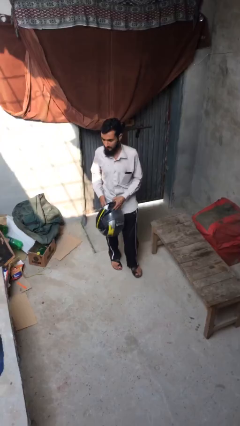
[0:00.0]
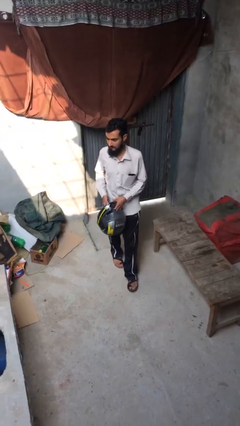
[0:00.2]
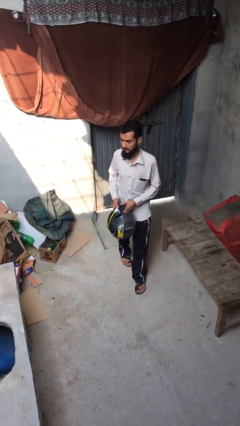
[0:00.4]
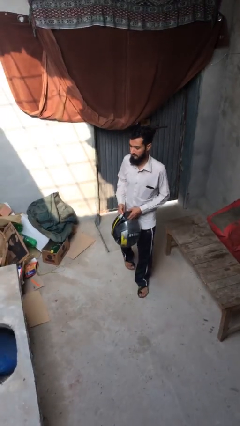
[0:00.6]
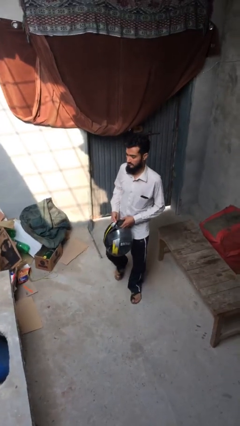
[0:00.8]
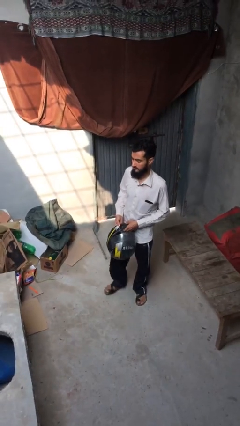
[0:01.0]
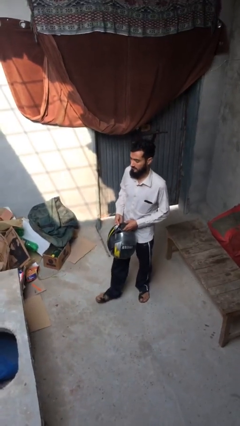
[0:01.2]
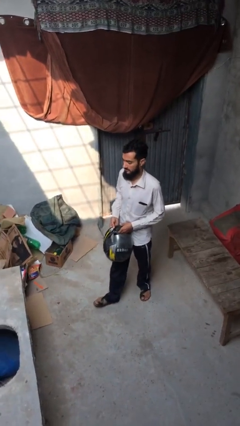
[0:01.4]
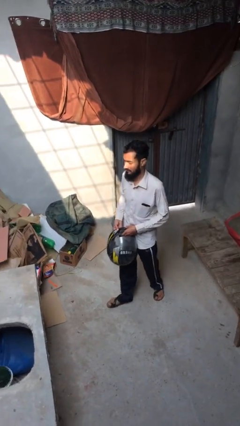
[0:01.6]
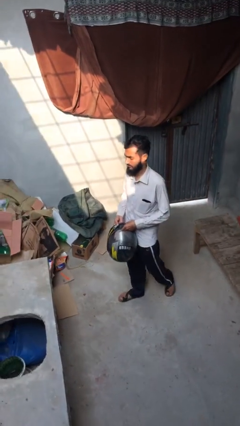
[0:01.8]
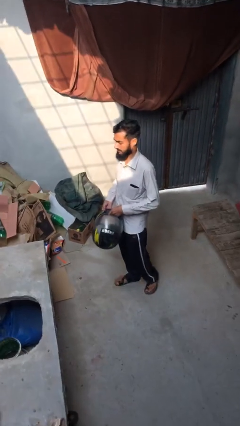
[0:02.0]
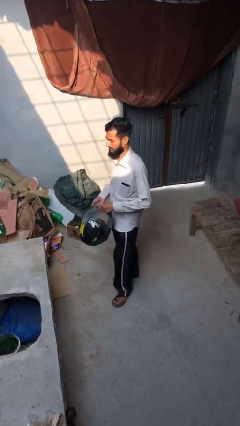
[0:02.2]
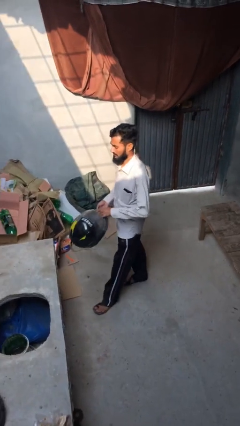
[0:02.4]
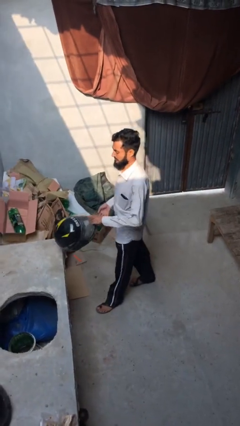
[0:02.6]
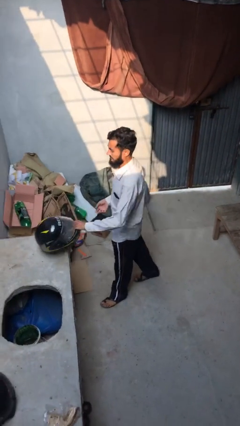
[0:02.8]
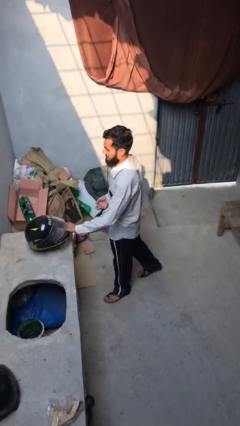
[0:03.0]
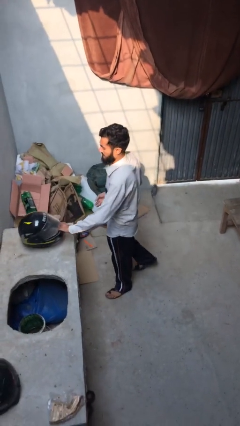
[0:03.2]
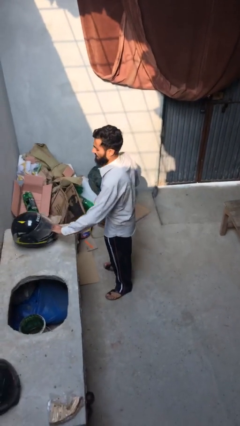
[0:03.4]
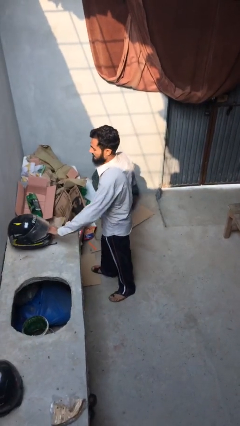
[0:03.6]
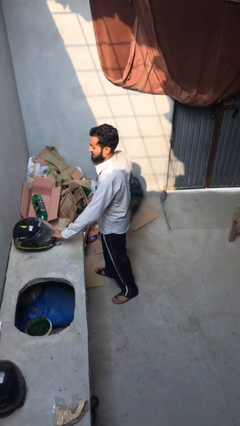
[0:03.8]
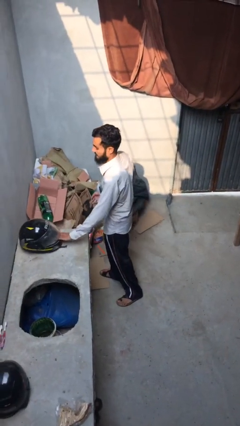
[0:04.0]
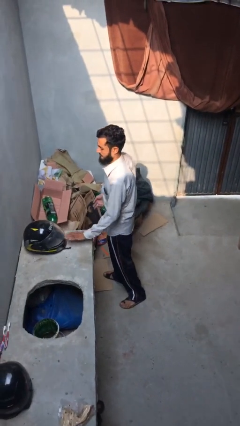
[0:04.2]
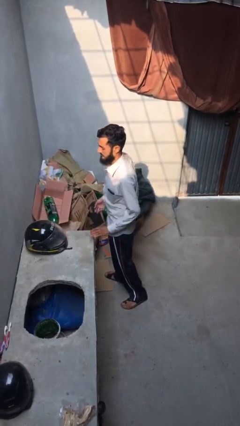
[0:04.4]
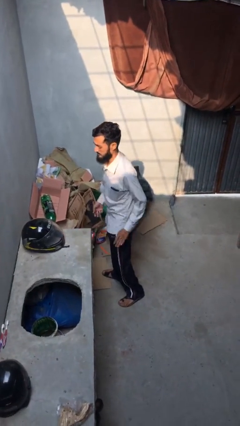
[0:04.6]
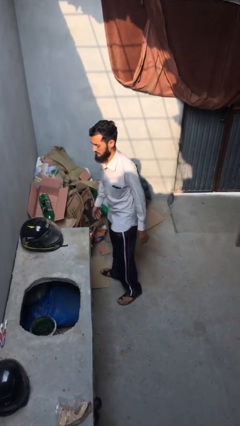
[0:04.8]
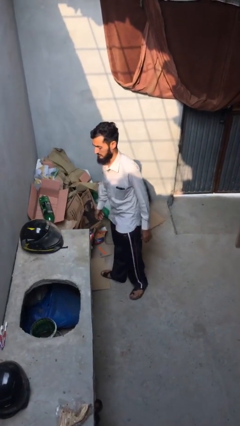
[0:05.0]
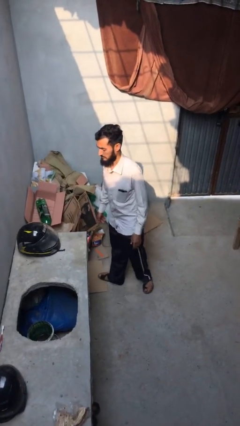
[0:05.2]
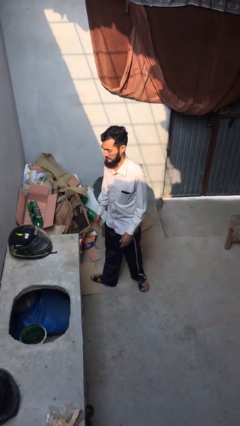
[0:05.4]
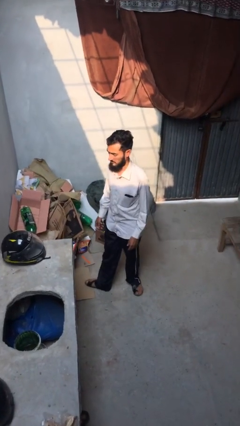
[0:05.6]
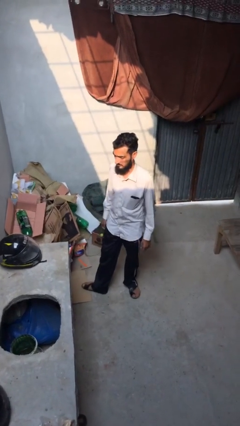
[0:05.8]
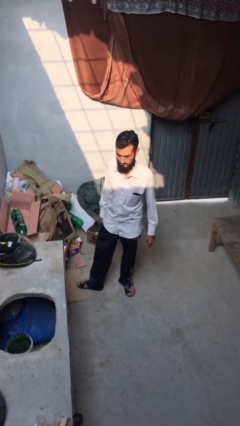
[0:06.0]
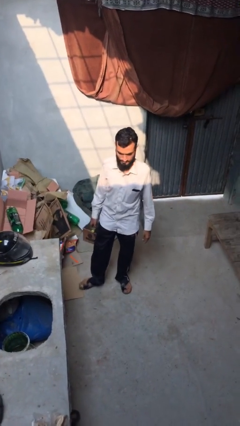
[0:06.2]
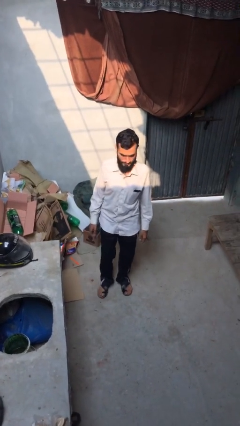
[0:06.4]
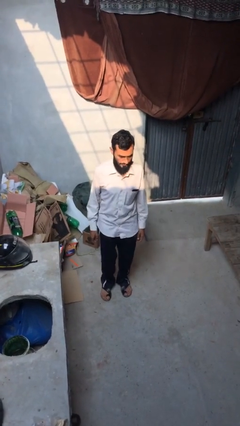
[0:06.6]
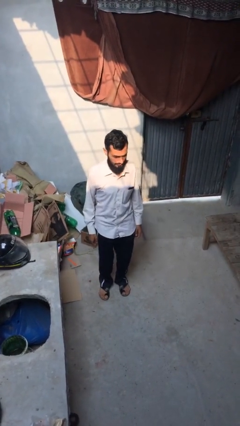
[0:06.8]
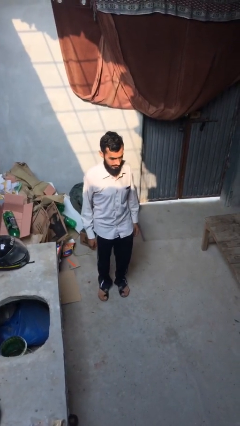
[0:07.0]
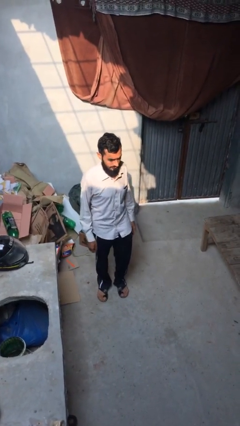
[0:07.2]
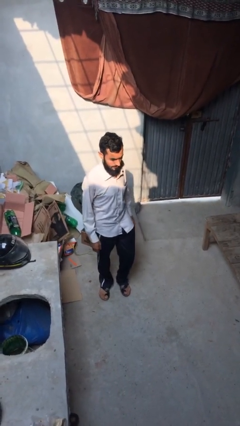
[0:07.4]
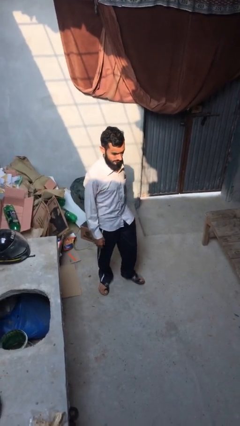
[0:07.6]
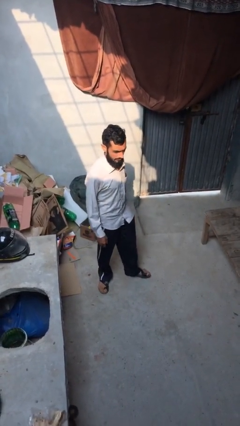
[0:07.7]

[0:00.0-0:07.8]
person puts down object on shelf

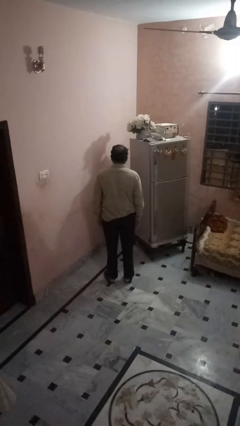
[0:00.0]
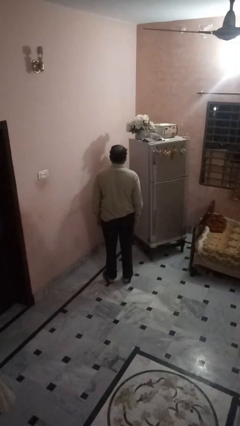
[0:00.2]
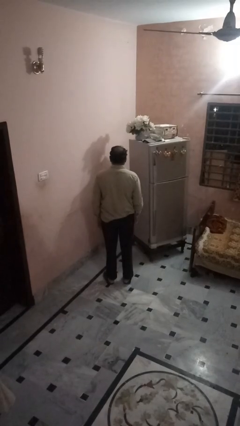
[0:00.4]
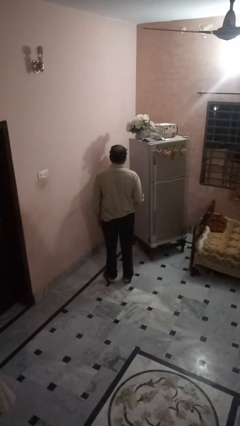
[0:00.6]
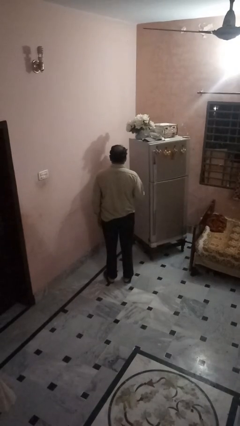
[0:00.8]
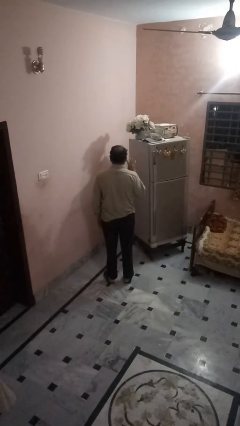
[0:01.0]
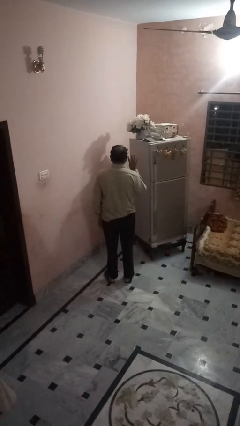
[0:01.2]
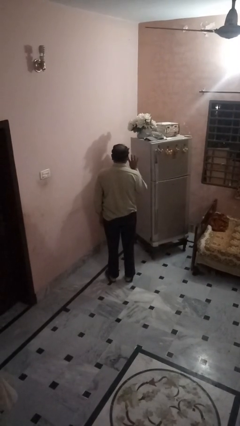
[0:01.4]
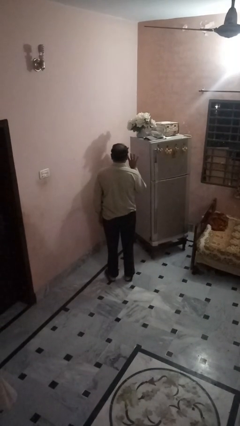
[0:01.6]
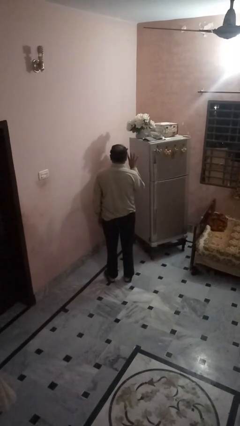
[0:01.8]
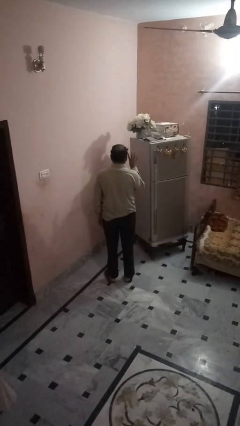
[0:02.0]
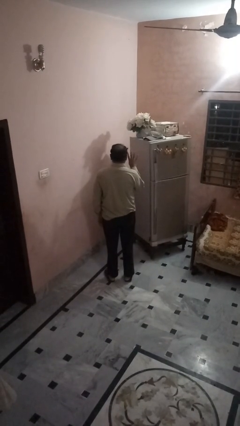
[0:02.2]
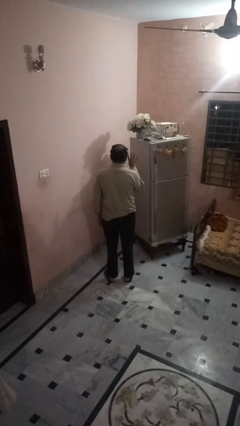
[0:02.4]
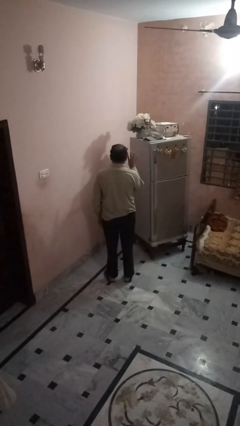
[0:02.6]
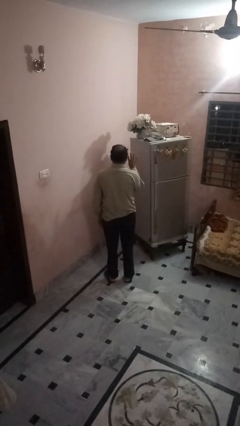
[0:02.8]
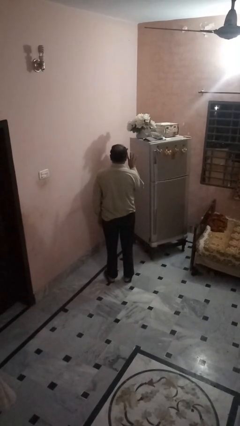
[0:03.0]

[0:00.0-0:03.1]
person gestures number four

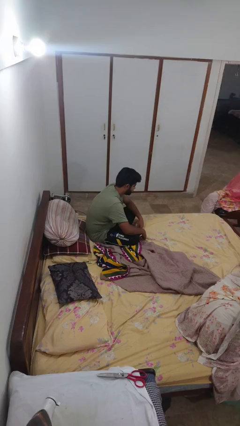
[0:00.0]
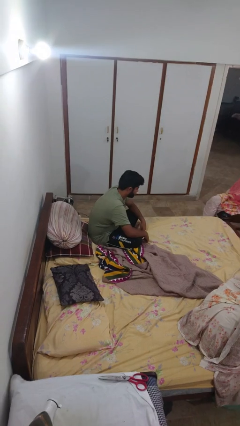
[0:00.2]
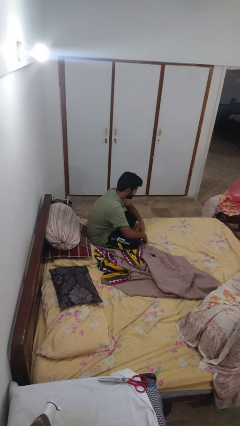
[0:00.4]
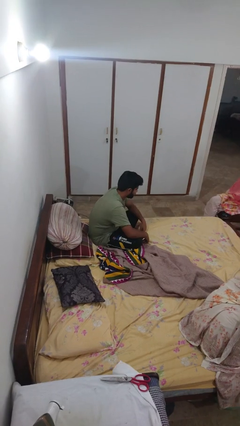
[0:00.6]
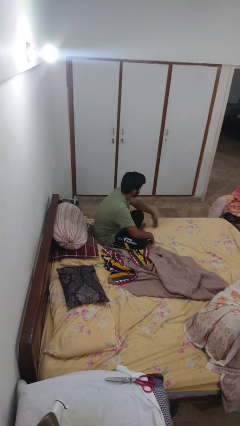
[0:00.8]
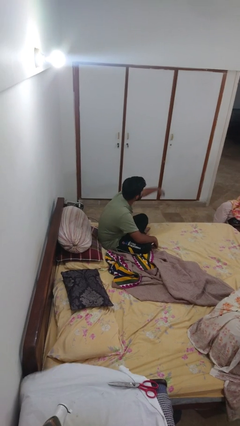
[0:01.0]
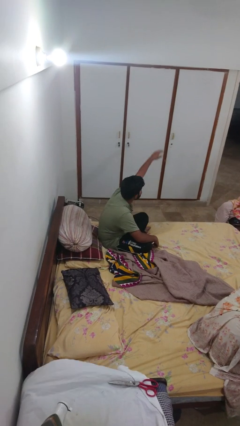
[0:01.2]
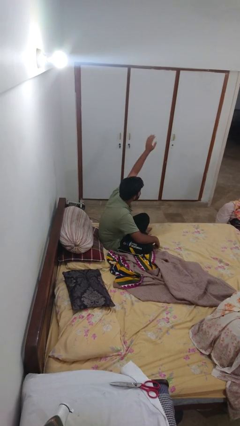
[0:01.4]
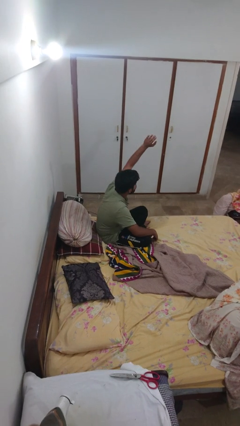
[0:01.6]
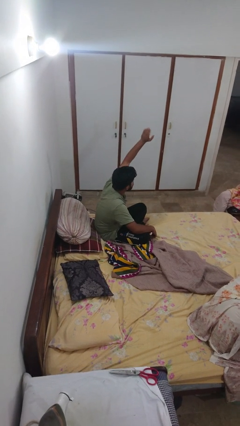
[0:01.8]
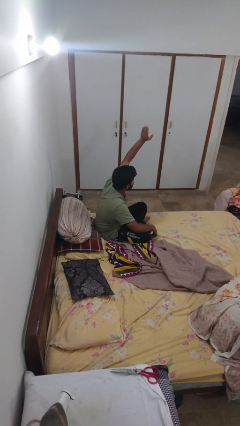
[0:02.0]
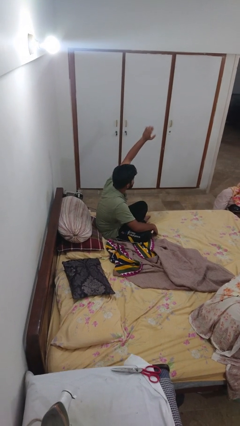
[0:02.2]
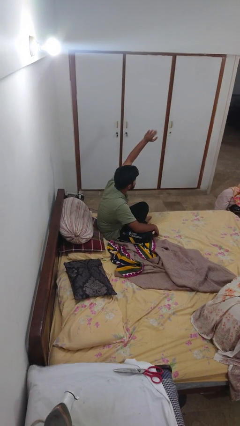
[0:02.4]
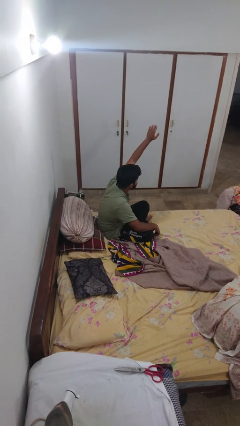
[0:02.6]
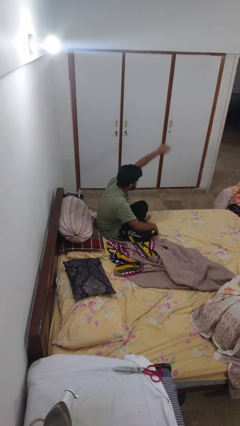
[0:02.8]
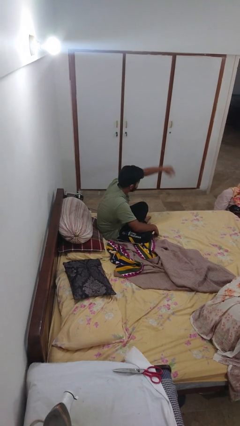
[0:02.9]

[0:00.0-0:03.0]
person waves at person

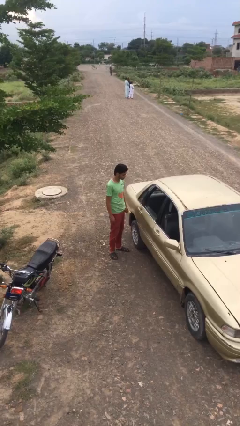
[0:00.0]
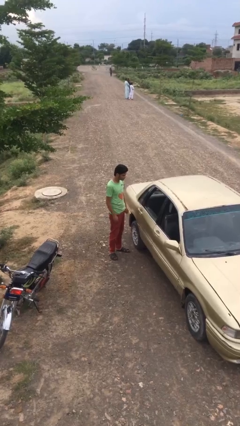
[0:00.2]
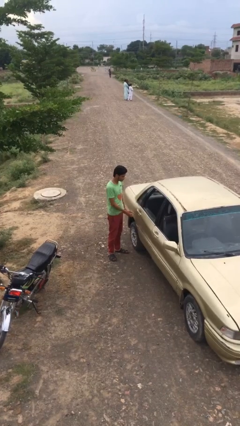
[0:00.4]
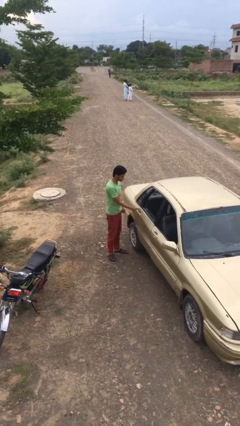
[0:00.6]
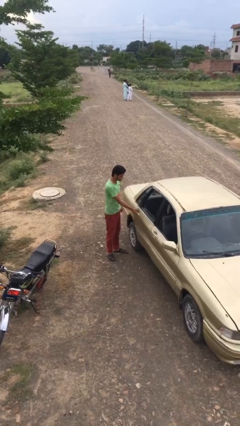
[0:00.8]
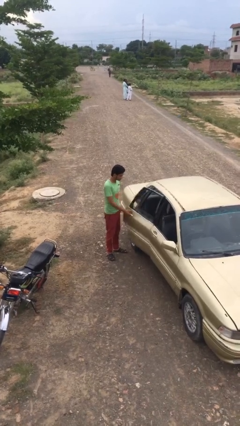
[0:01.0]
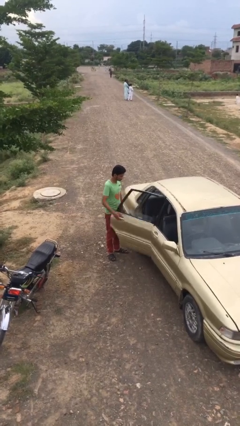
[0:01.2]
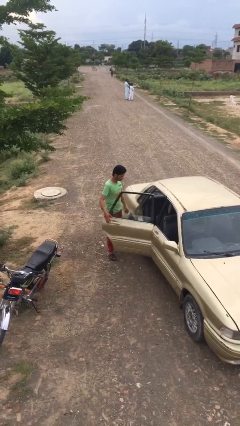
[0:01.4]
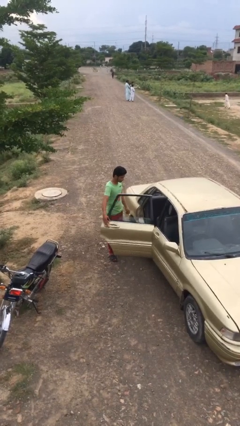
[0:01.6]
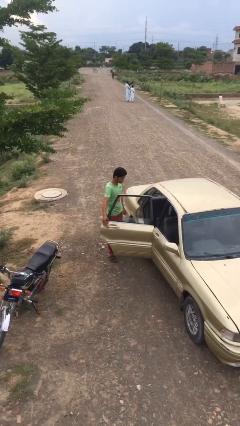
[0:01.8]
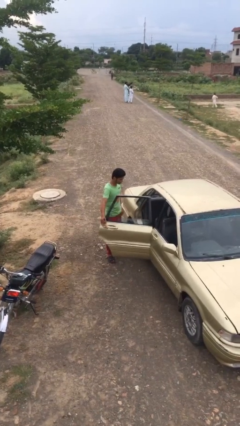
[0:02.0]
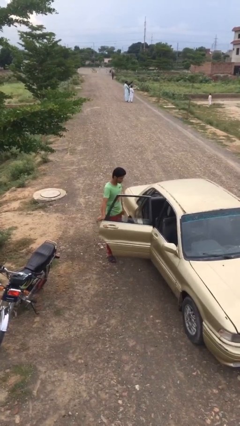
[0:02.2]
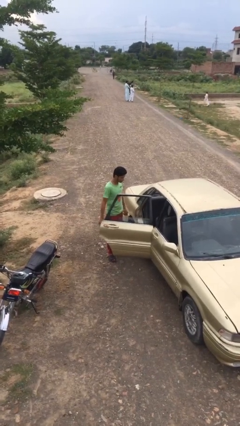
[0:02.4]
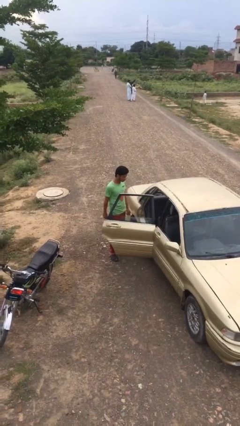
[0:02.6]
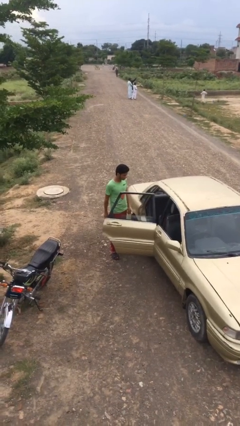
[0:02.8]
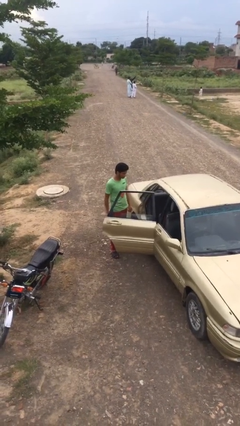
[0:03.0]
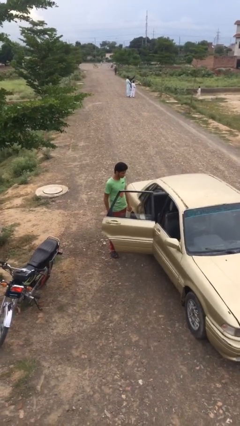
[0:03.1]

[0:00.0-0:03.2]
person opens car door

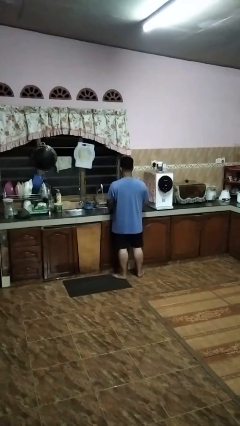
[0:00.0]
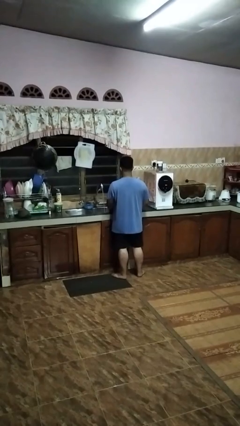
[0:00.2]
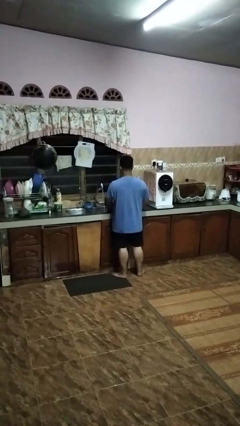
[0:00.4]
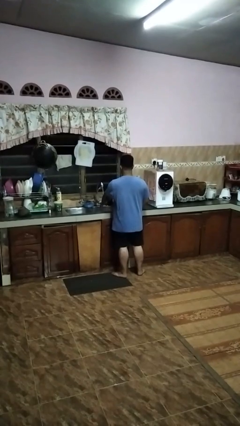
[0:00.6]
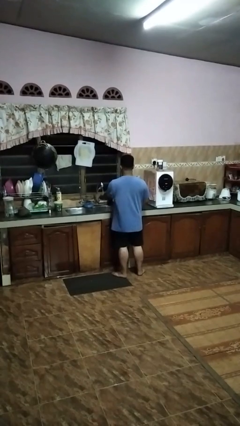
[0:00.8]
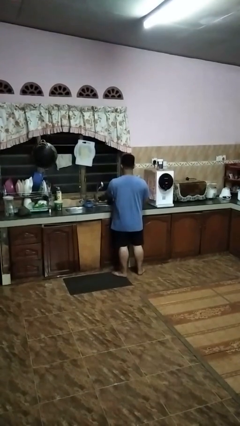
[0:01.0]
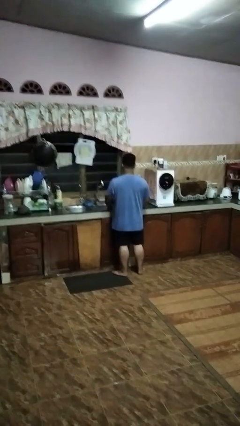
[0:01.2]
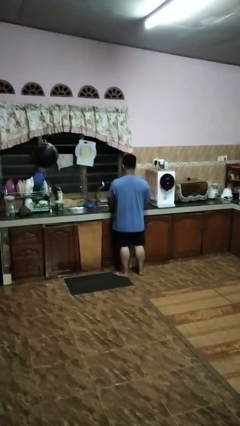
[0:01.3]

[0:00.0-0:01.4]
person turns off faucet
